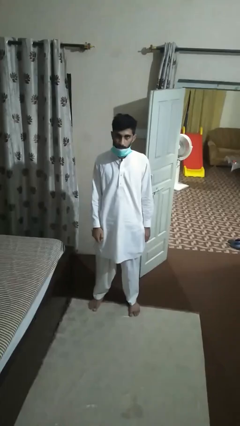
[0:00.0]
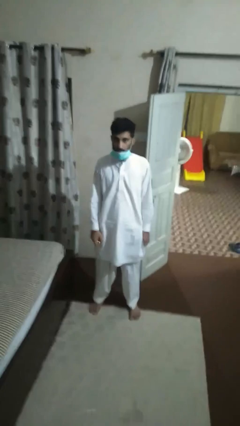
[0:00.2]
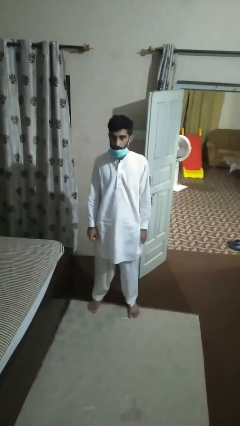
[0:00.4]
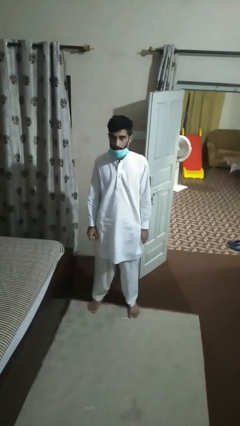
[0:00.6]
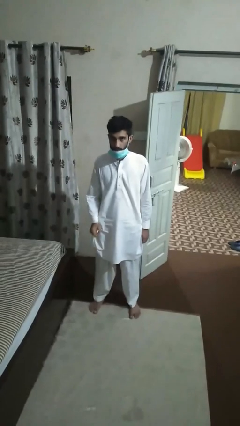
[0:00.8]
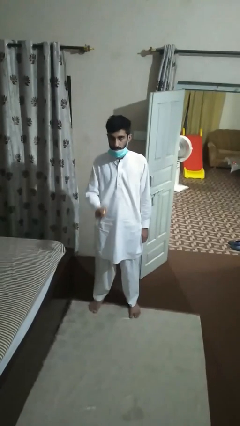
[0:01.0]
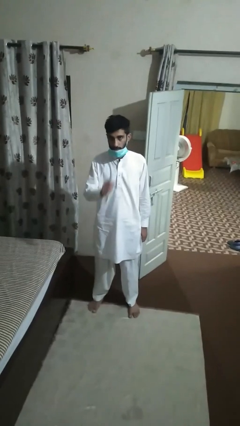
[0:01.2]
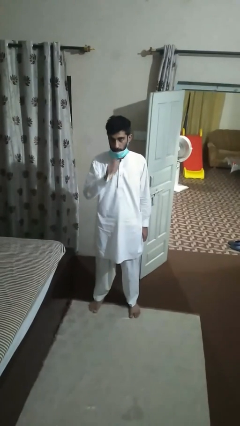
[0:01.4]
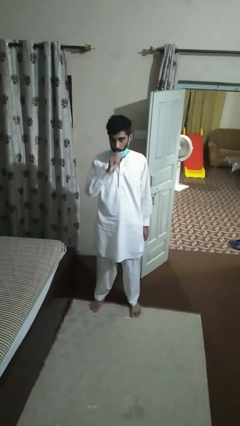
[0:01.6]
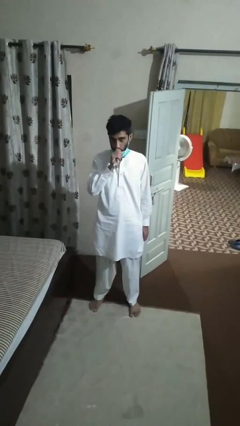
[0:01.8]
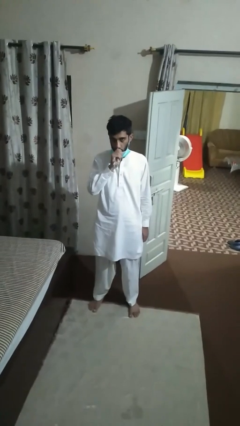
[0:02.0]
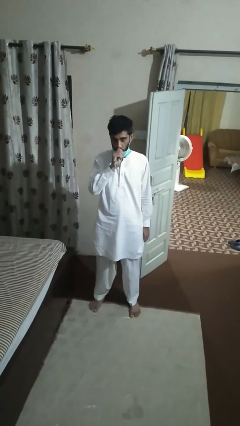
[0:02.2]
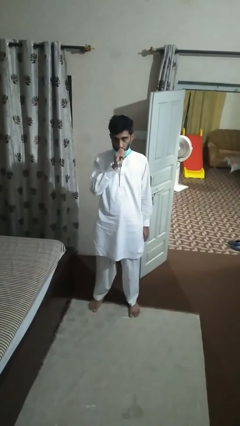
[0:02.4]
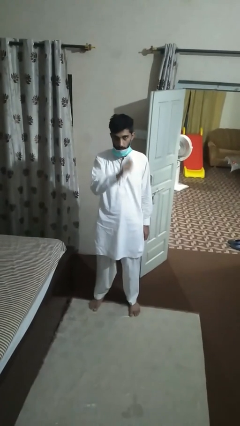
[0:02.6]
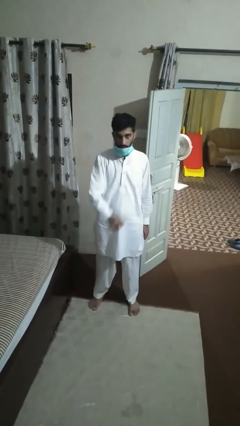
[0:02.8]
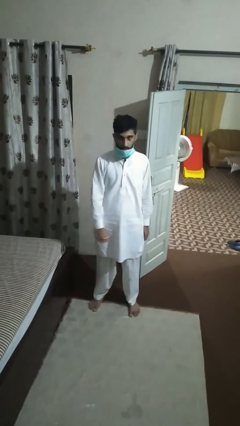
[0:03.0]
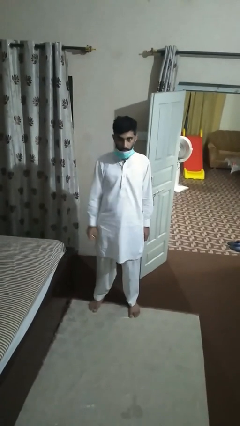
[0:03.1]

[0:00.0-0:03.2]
person vapes

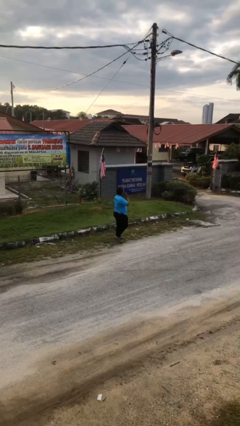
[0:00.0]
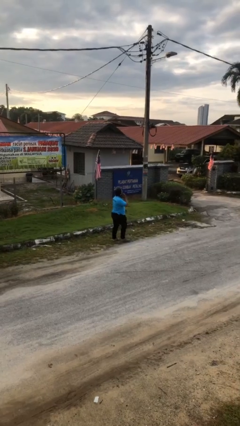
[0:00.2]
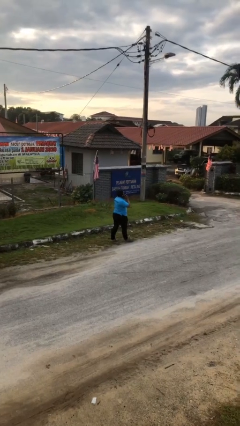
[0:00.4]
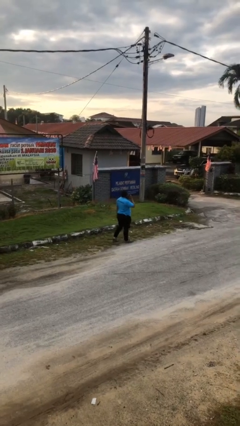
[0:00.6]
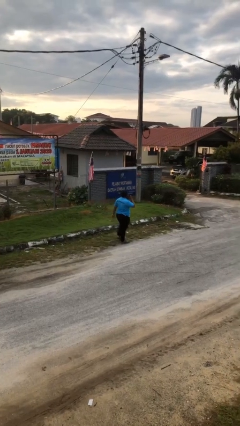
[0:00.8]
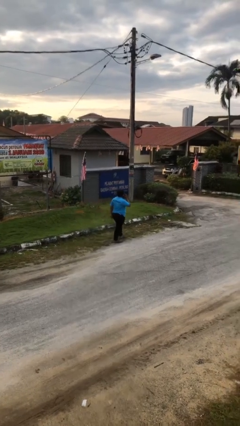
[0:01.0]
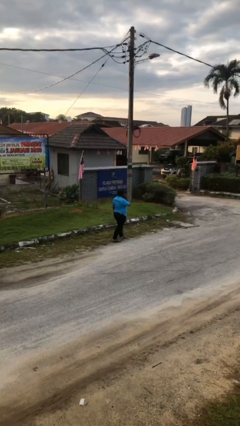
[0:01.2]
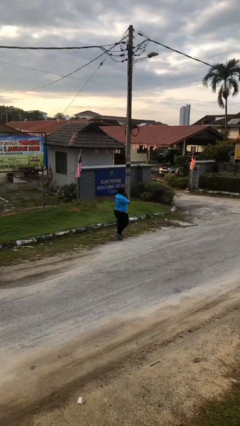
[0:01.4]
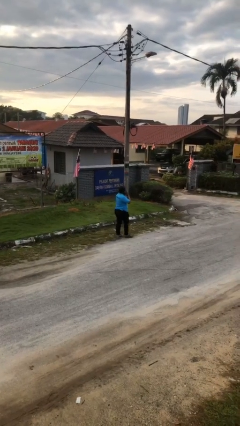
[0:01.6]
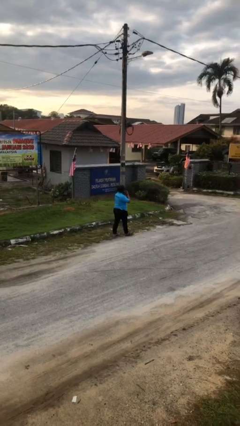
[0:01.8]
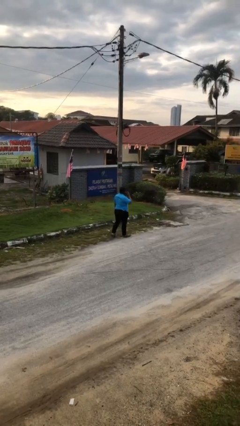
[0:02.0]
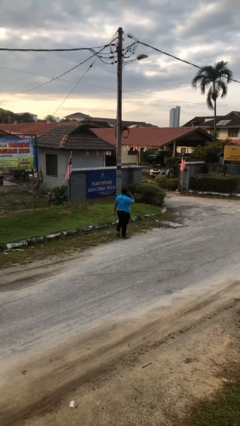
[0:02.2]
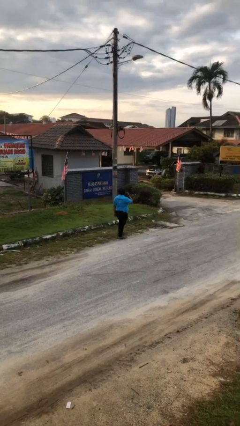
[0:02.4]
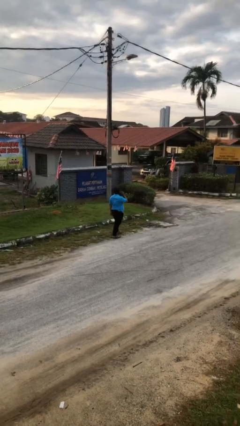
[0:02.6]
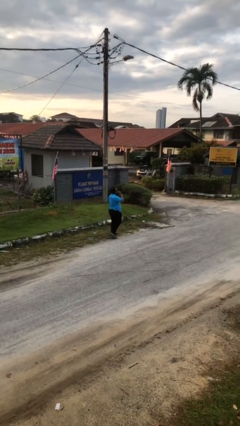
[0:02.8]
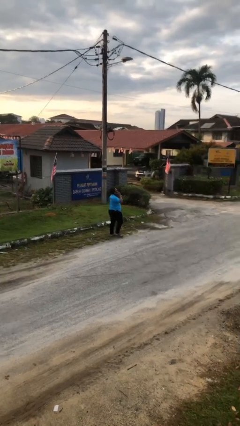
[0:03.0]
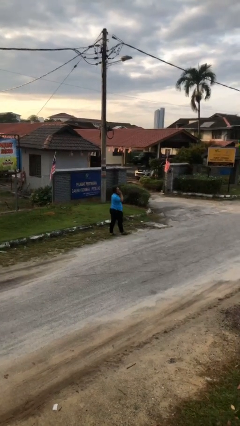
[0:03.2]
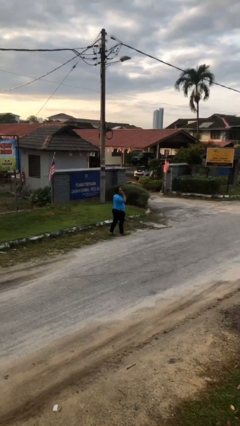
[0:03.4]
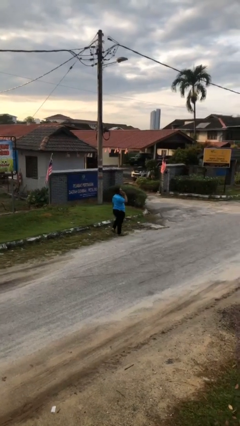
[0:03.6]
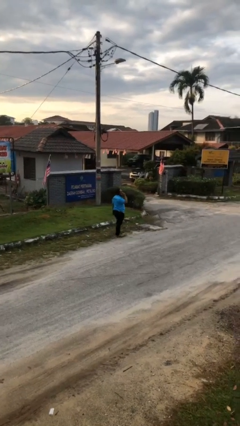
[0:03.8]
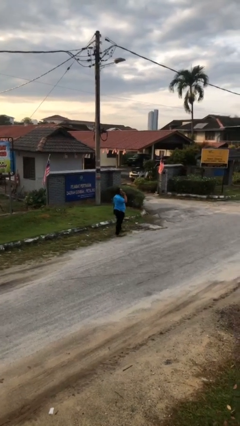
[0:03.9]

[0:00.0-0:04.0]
person talks on phone

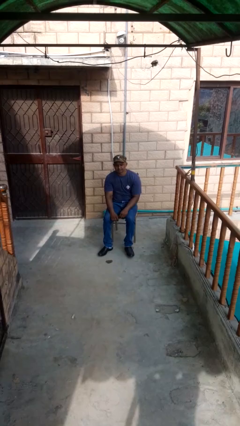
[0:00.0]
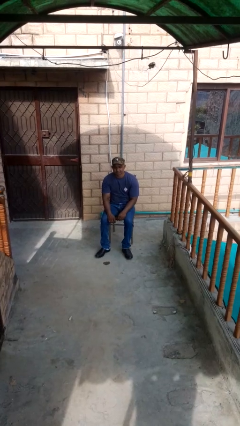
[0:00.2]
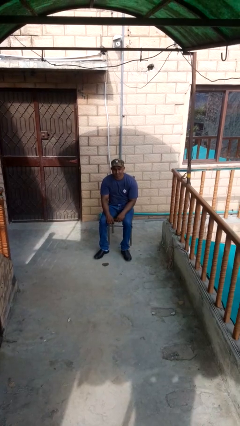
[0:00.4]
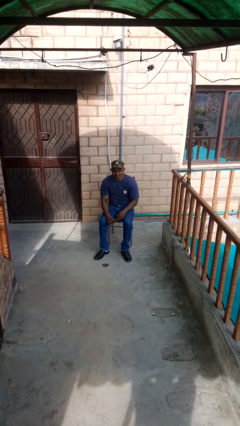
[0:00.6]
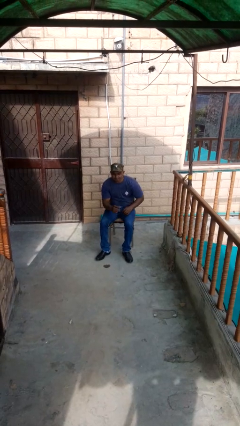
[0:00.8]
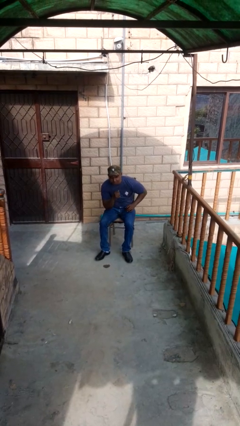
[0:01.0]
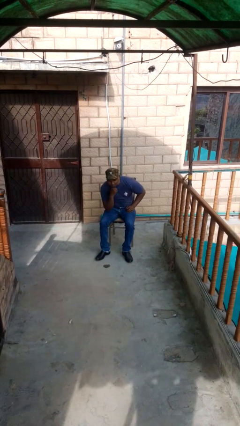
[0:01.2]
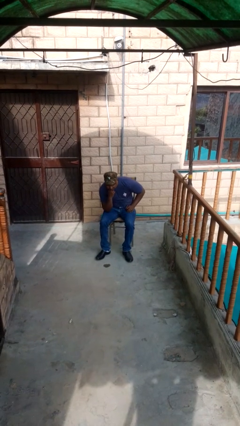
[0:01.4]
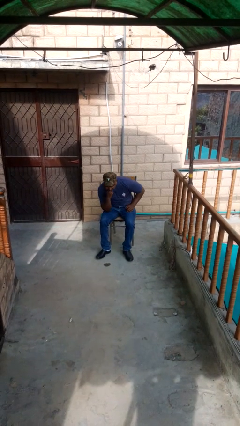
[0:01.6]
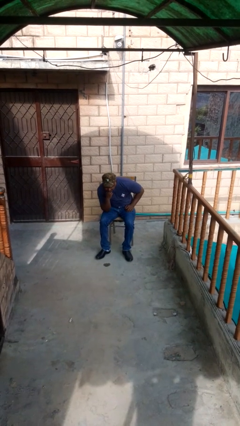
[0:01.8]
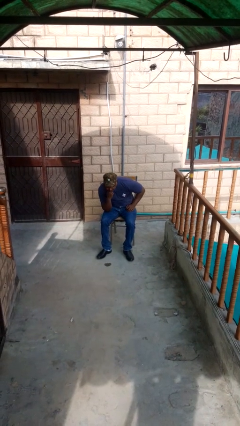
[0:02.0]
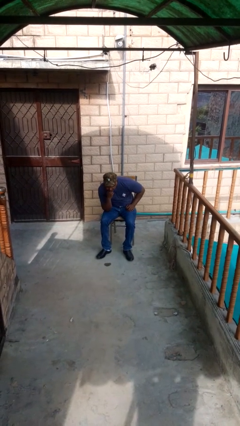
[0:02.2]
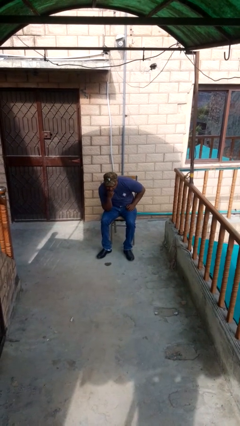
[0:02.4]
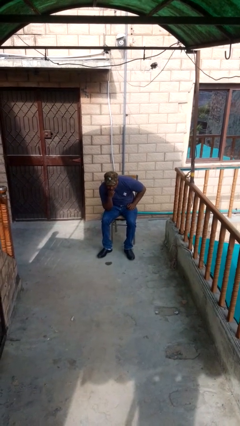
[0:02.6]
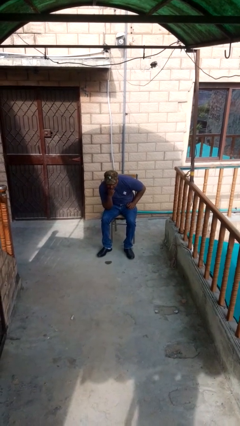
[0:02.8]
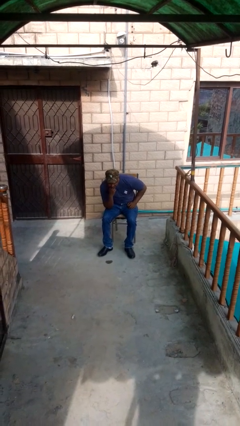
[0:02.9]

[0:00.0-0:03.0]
person strokes chin

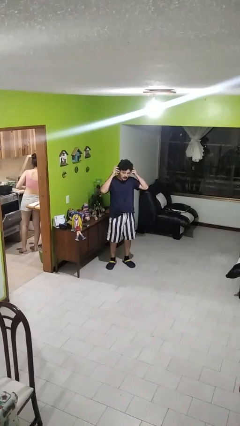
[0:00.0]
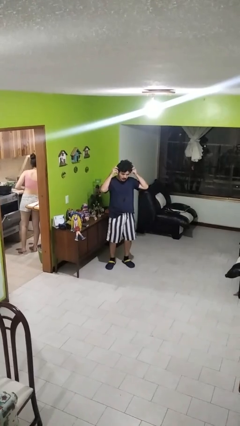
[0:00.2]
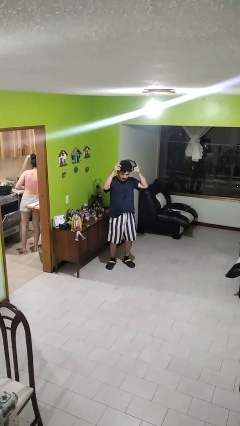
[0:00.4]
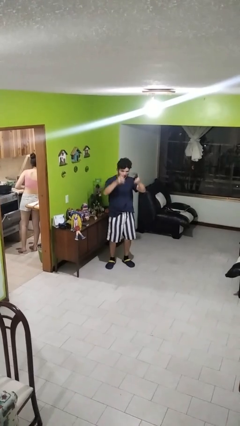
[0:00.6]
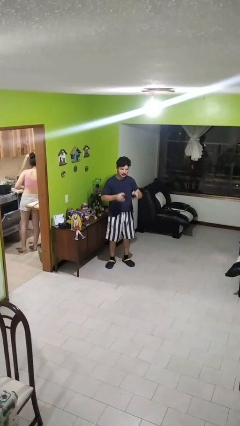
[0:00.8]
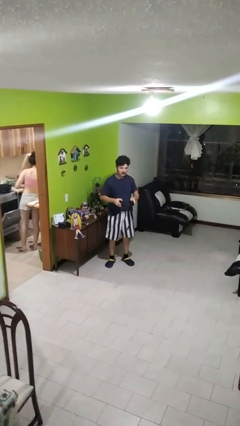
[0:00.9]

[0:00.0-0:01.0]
person takes off headphones

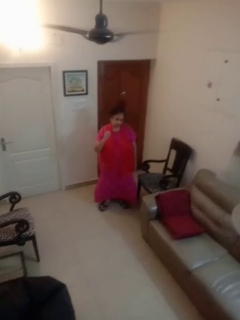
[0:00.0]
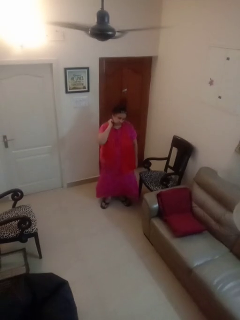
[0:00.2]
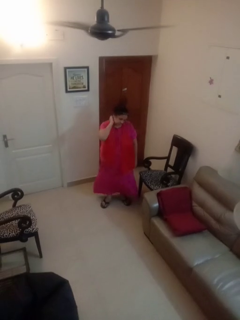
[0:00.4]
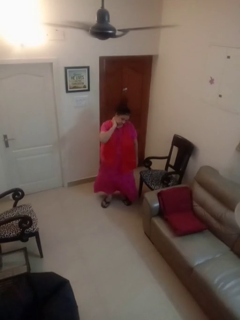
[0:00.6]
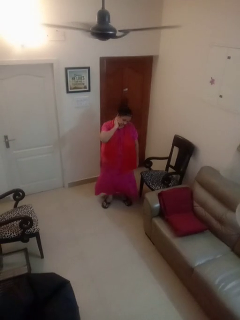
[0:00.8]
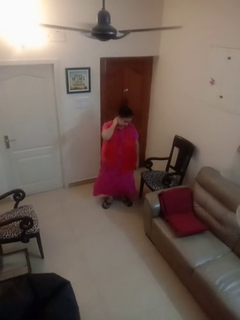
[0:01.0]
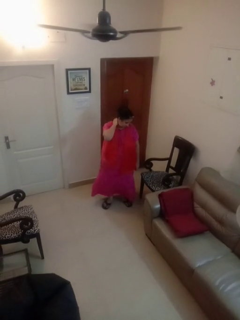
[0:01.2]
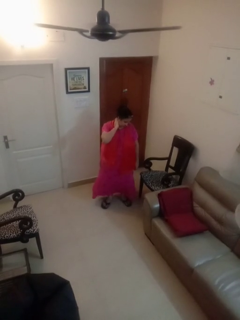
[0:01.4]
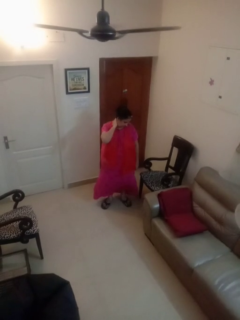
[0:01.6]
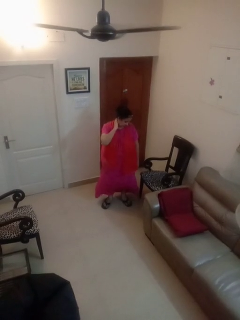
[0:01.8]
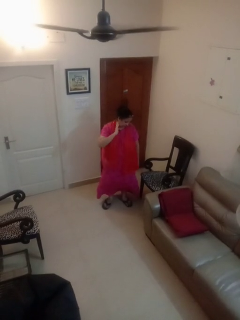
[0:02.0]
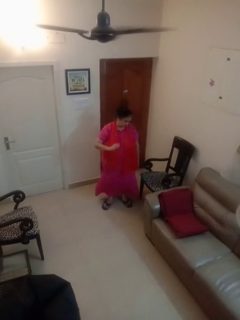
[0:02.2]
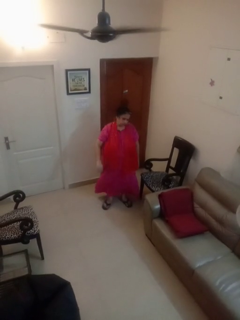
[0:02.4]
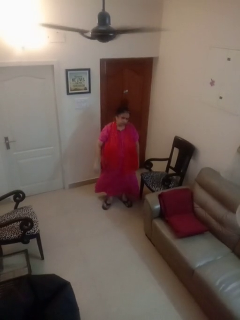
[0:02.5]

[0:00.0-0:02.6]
person rubs neck

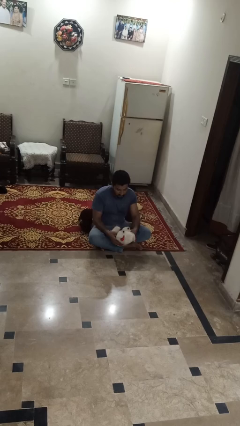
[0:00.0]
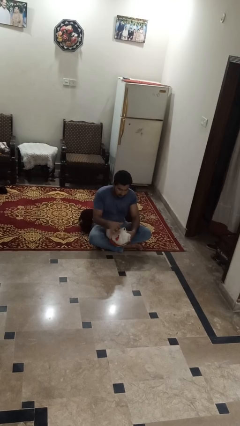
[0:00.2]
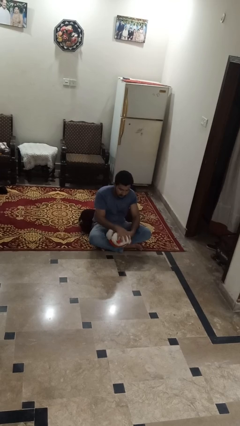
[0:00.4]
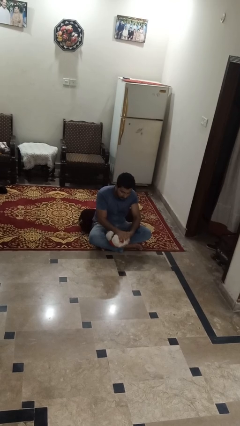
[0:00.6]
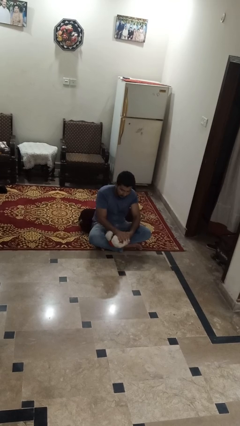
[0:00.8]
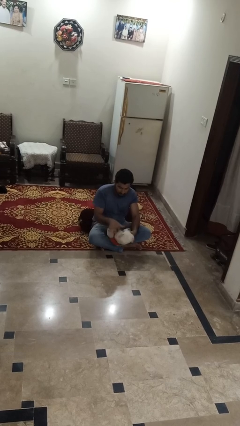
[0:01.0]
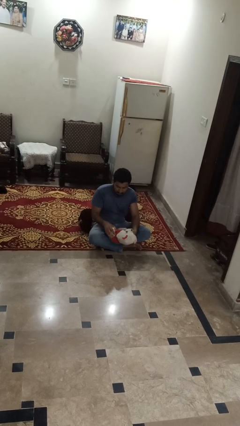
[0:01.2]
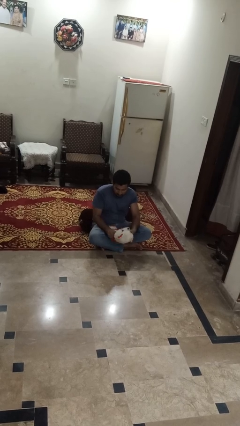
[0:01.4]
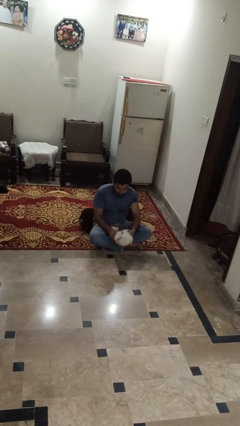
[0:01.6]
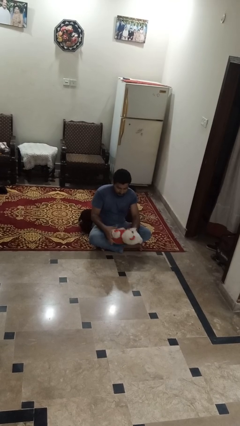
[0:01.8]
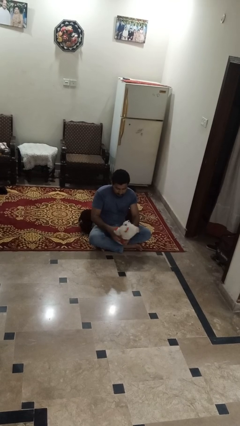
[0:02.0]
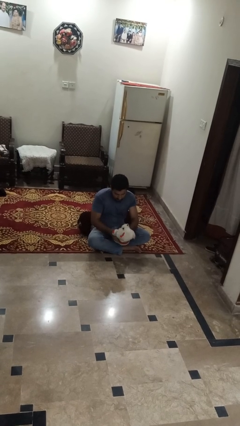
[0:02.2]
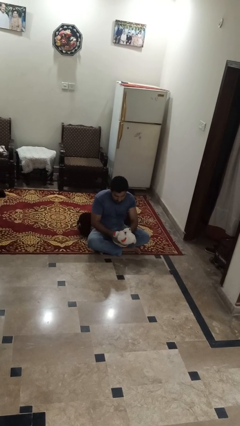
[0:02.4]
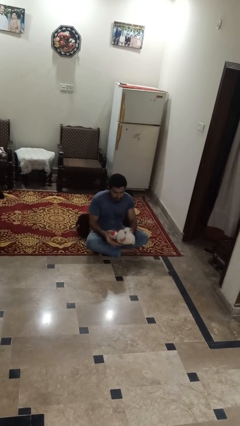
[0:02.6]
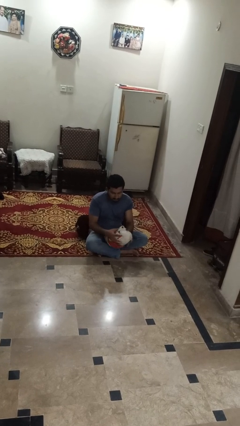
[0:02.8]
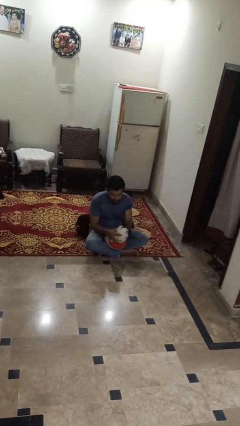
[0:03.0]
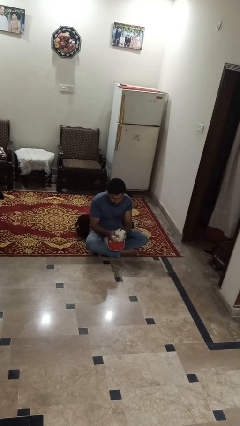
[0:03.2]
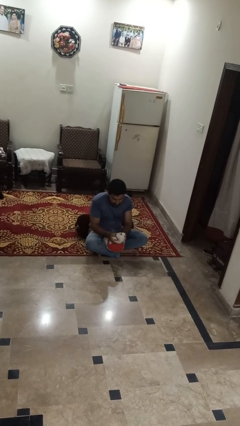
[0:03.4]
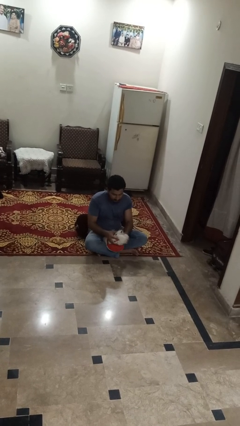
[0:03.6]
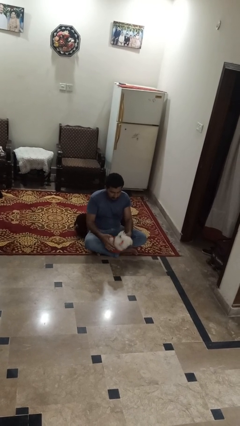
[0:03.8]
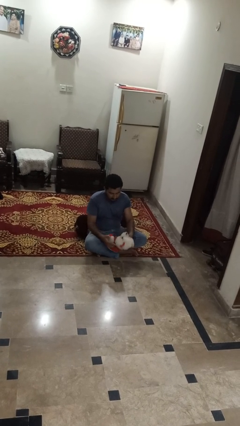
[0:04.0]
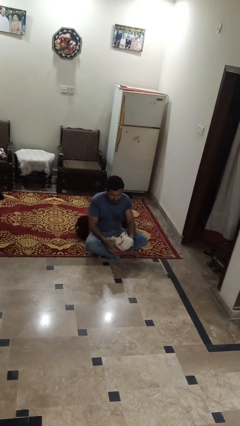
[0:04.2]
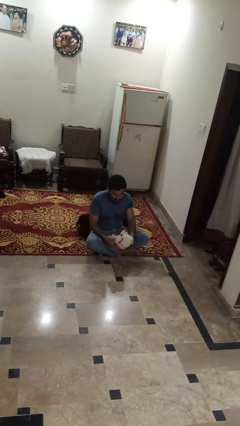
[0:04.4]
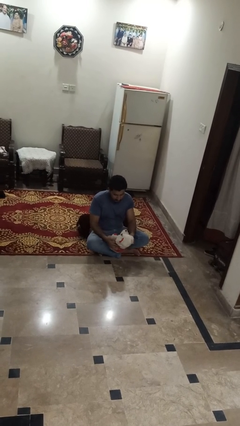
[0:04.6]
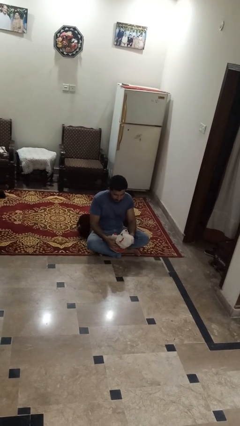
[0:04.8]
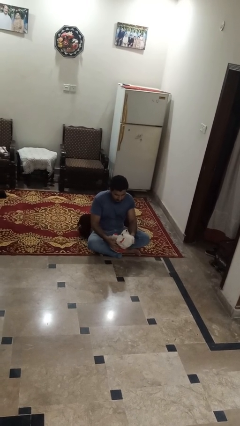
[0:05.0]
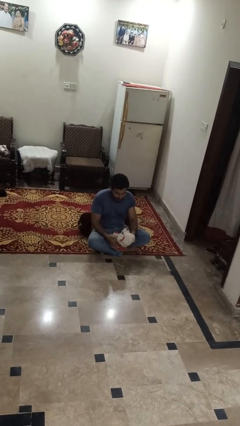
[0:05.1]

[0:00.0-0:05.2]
person squeezes object
